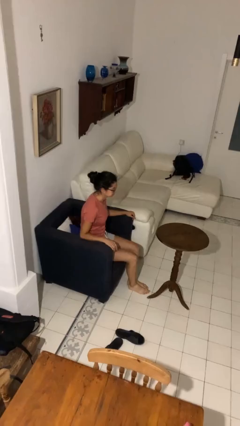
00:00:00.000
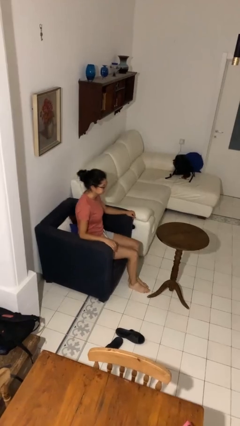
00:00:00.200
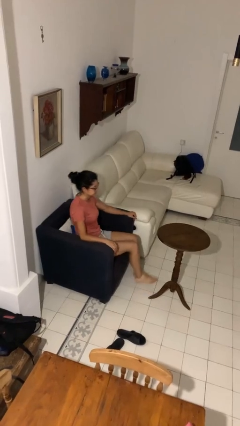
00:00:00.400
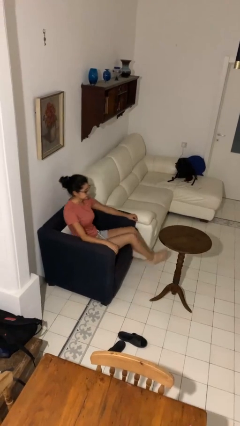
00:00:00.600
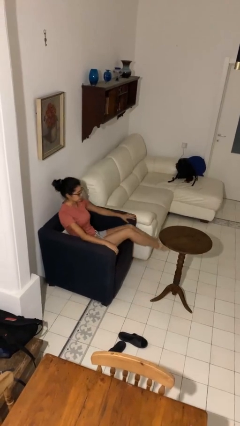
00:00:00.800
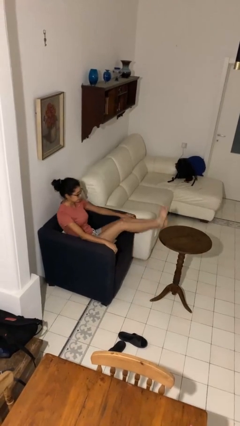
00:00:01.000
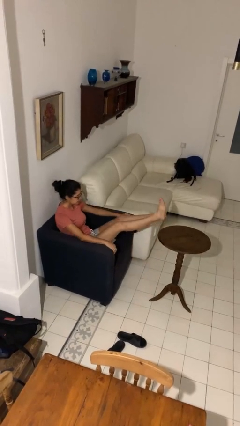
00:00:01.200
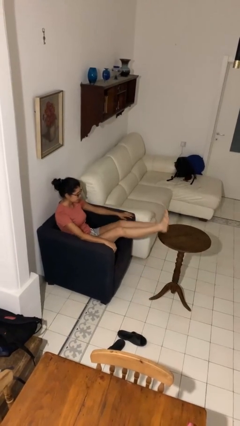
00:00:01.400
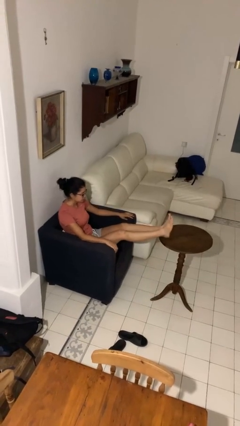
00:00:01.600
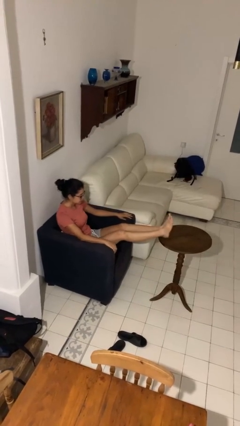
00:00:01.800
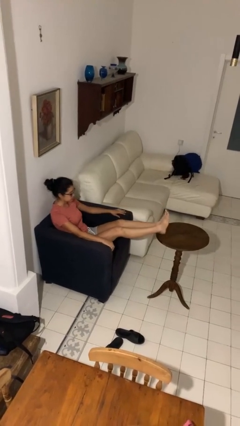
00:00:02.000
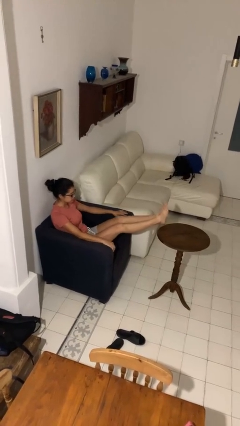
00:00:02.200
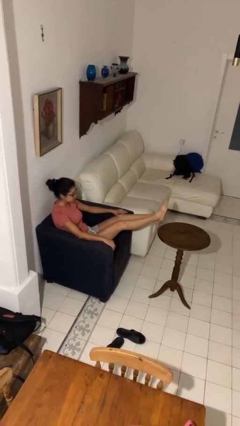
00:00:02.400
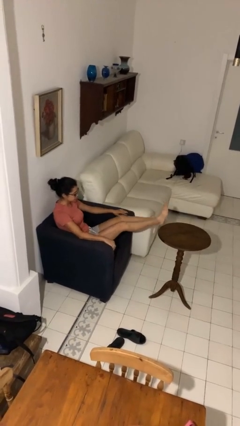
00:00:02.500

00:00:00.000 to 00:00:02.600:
person puts feet up

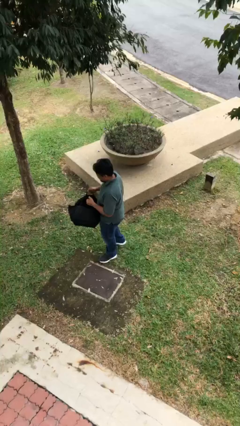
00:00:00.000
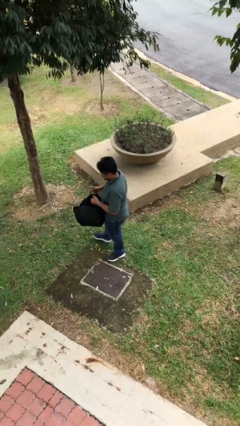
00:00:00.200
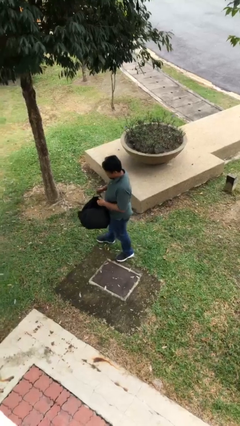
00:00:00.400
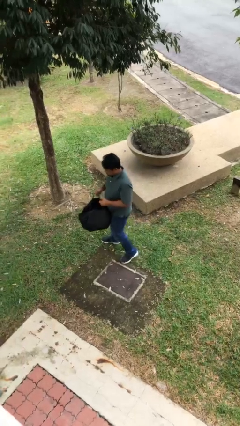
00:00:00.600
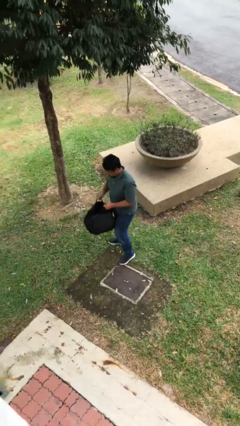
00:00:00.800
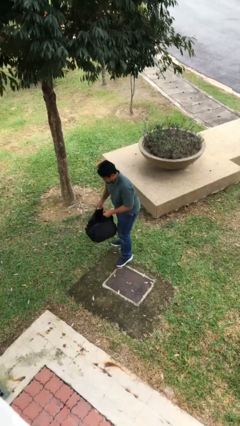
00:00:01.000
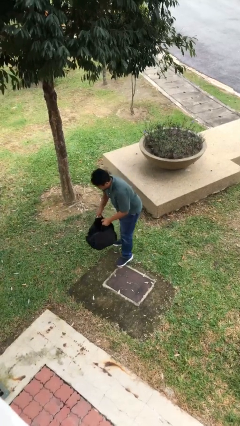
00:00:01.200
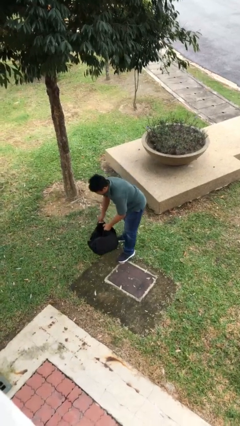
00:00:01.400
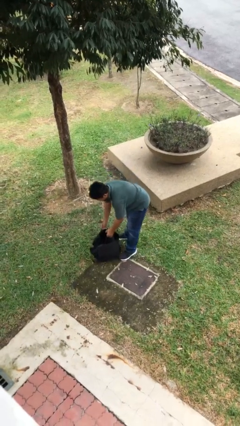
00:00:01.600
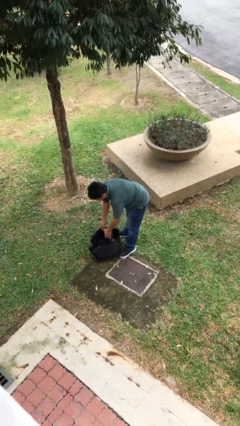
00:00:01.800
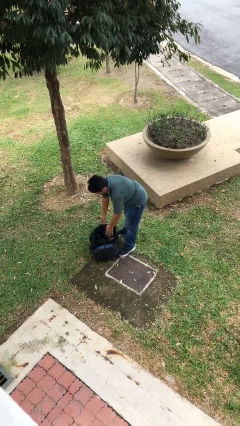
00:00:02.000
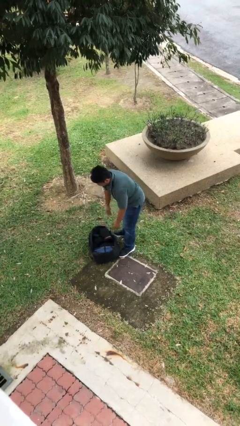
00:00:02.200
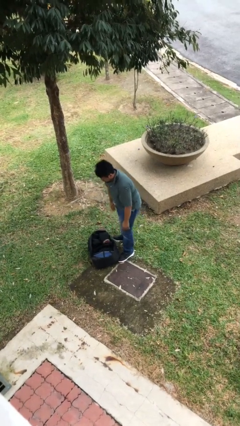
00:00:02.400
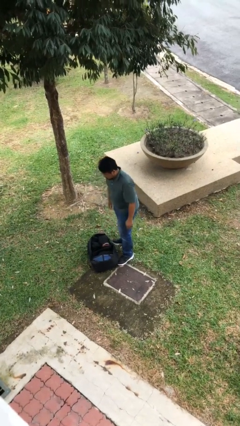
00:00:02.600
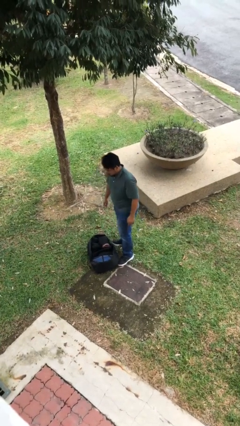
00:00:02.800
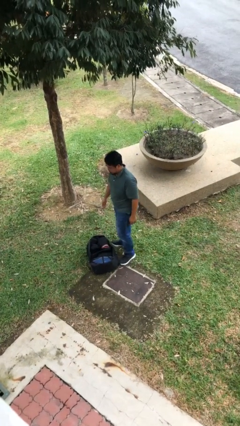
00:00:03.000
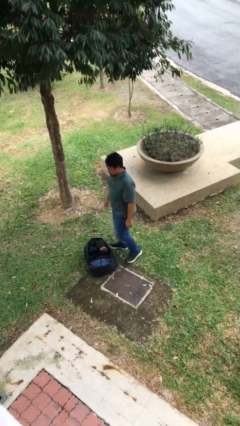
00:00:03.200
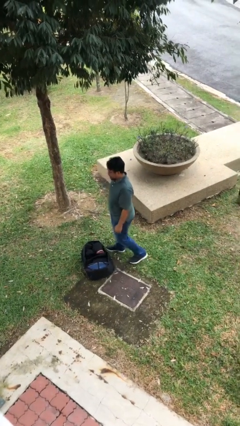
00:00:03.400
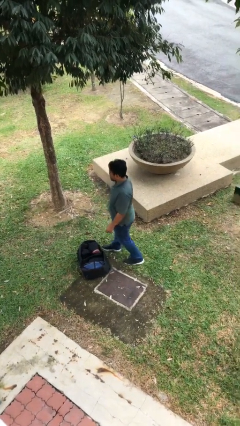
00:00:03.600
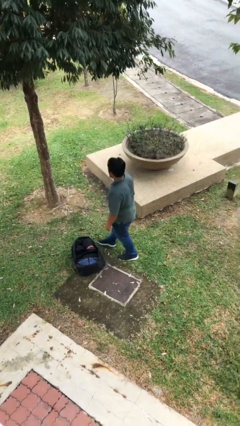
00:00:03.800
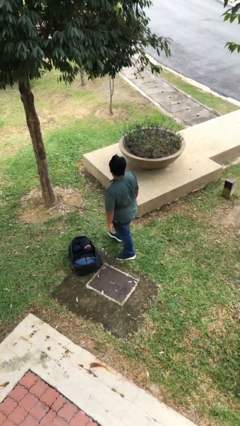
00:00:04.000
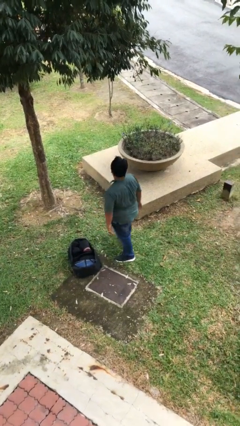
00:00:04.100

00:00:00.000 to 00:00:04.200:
person puts down object on floor

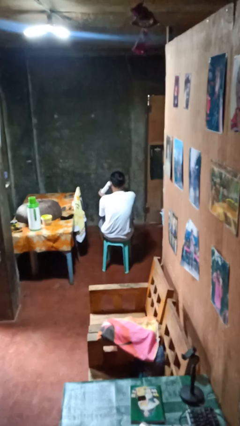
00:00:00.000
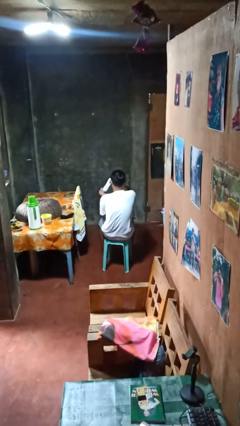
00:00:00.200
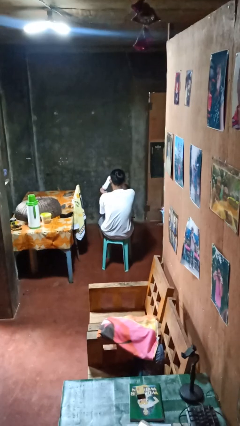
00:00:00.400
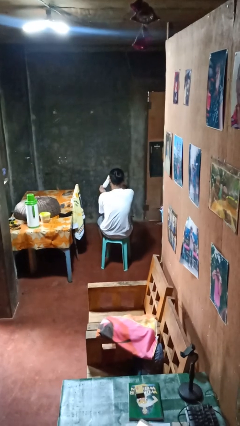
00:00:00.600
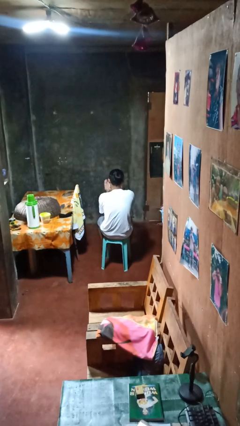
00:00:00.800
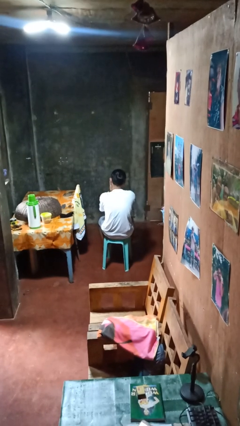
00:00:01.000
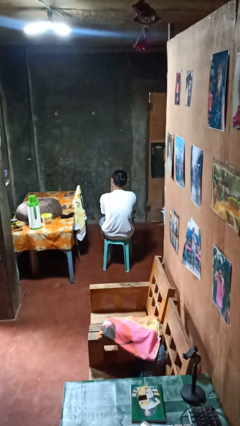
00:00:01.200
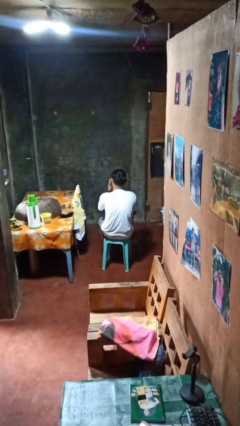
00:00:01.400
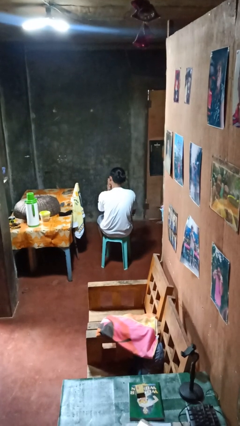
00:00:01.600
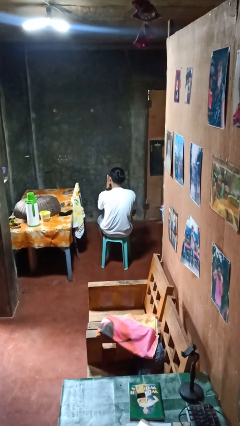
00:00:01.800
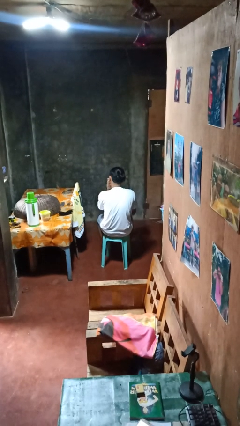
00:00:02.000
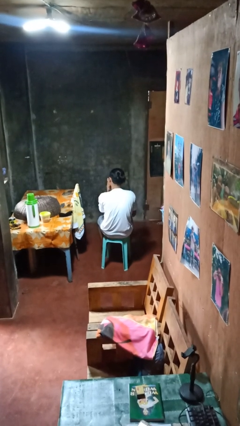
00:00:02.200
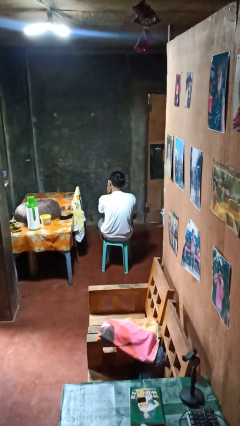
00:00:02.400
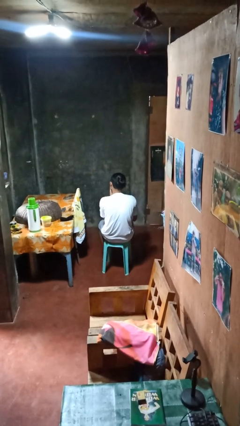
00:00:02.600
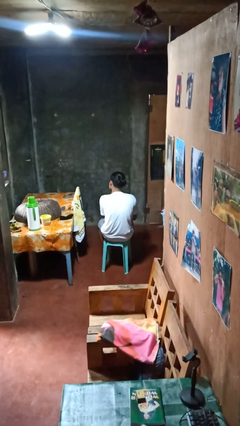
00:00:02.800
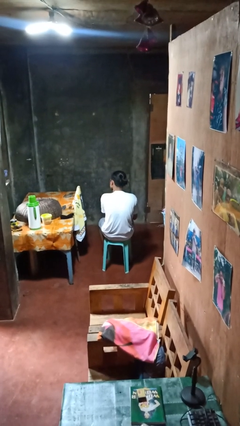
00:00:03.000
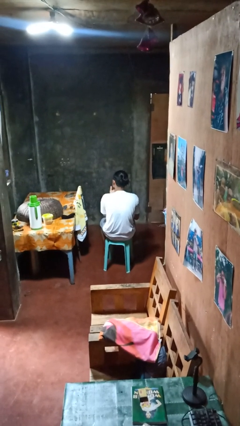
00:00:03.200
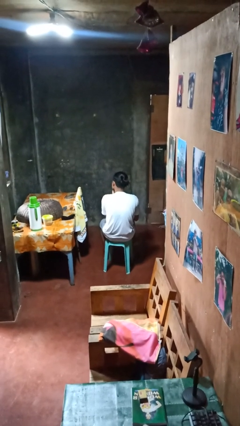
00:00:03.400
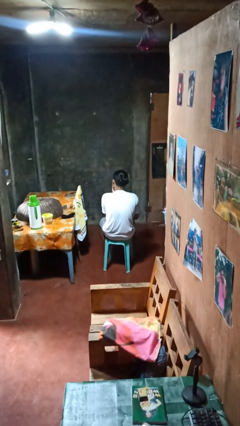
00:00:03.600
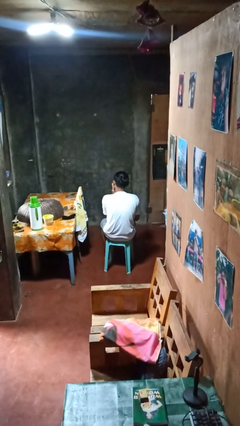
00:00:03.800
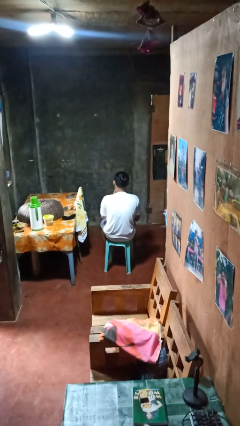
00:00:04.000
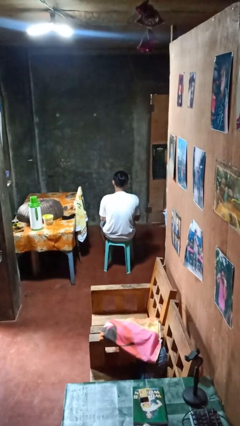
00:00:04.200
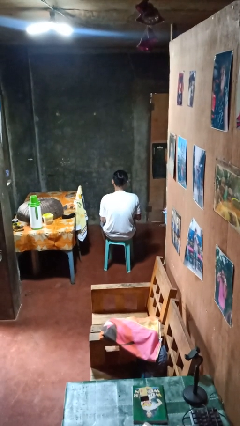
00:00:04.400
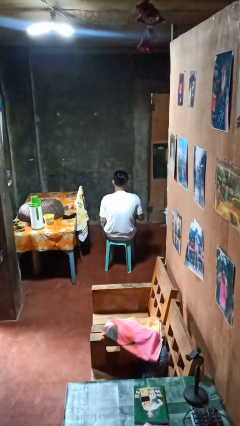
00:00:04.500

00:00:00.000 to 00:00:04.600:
person applies shaving cream

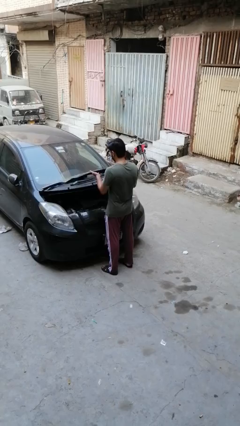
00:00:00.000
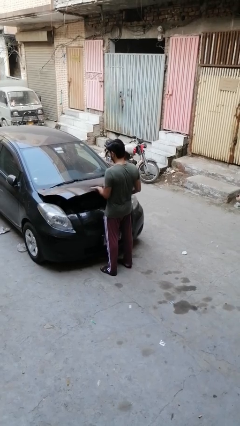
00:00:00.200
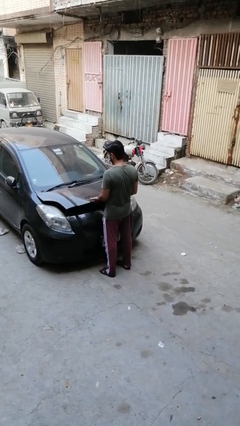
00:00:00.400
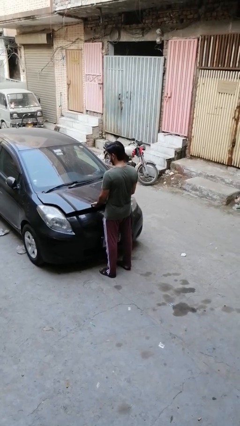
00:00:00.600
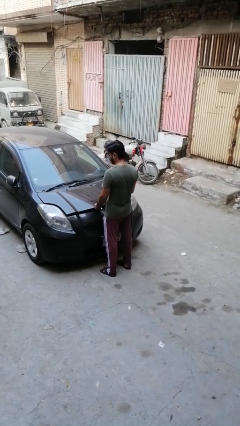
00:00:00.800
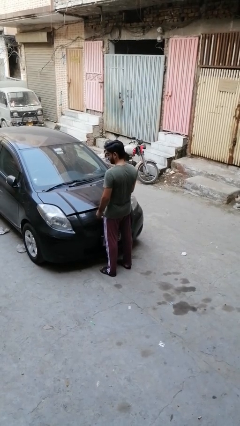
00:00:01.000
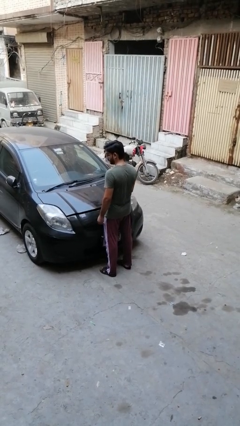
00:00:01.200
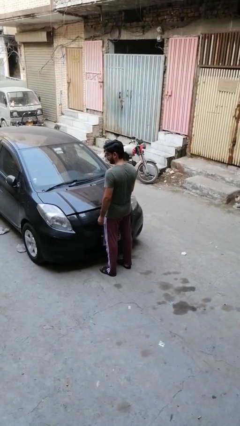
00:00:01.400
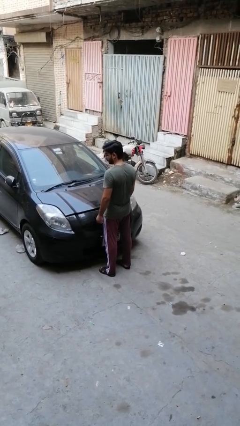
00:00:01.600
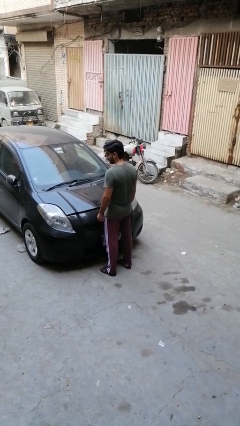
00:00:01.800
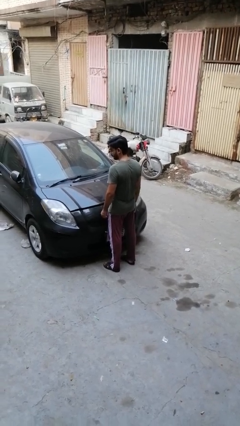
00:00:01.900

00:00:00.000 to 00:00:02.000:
person closes car hood

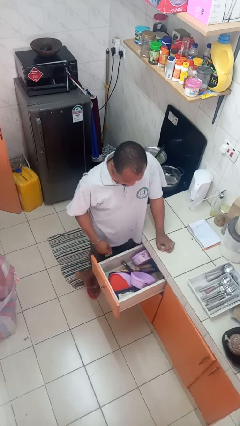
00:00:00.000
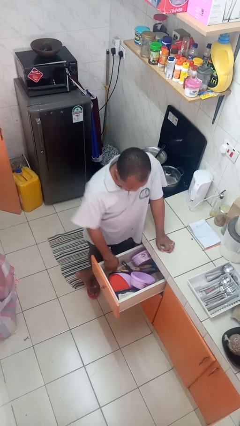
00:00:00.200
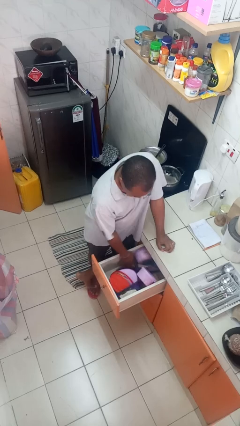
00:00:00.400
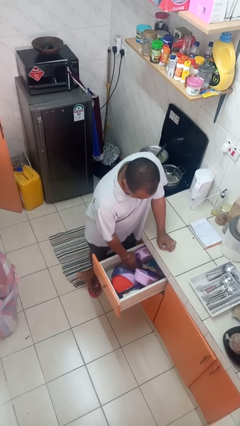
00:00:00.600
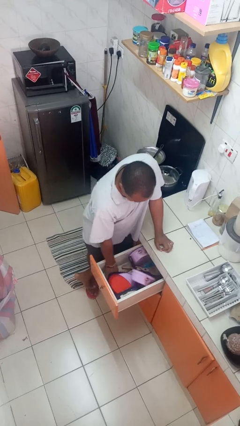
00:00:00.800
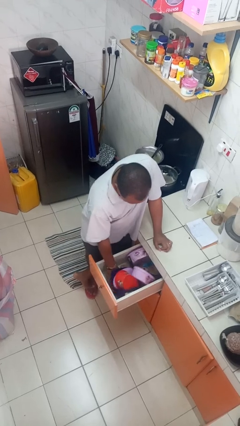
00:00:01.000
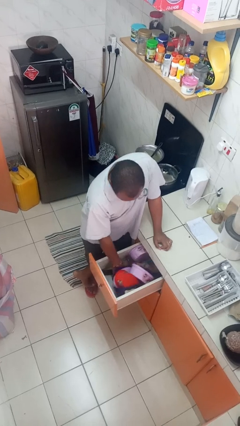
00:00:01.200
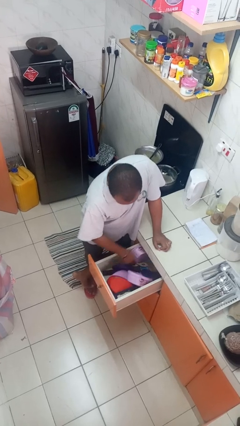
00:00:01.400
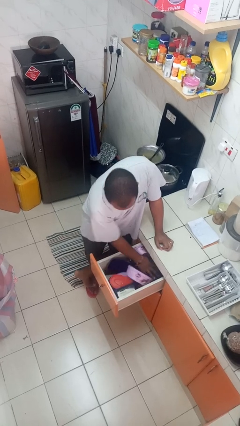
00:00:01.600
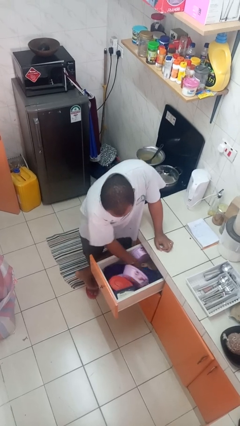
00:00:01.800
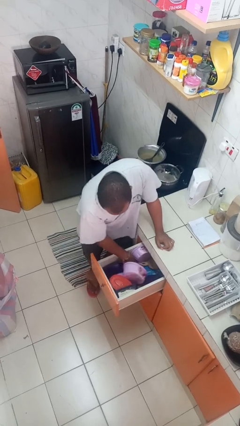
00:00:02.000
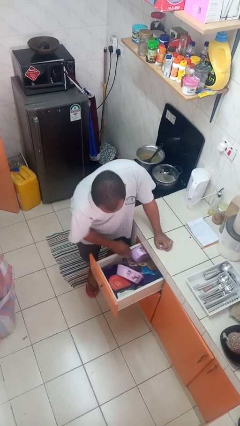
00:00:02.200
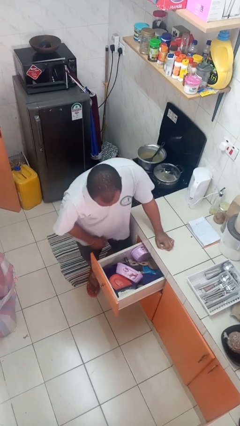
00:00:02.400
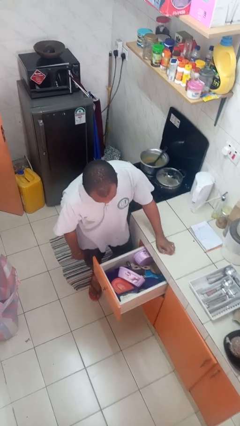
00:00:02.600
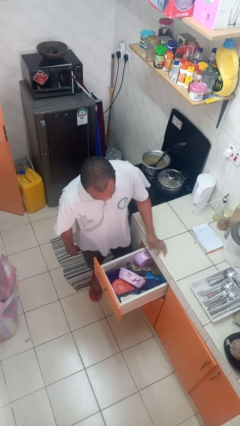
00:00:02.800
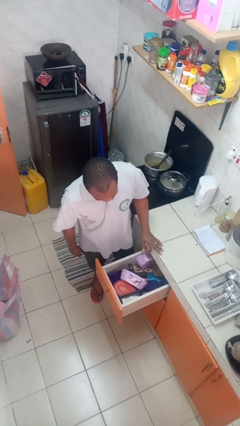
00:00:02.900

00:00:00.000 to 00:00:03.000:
person searches in kitchen drawer

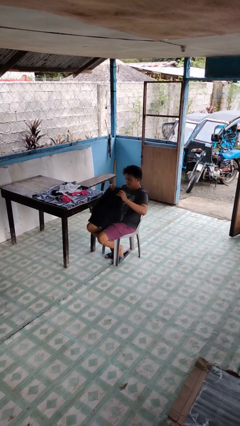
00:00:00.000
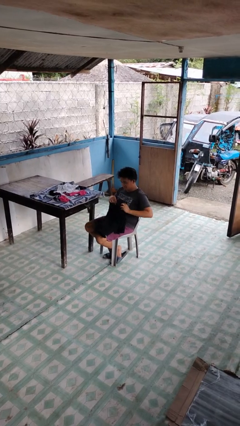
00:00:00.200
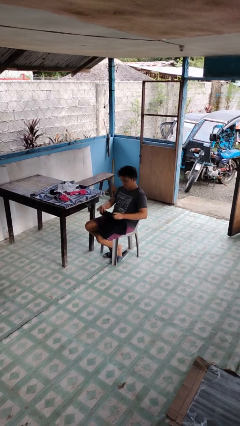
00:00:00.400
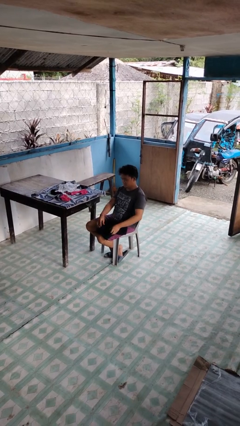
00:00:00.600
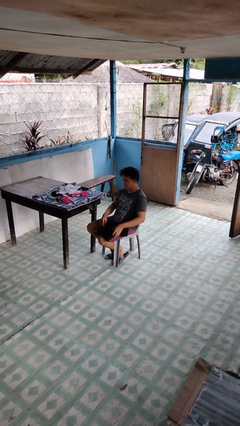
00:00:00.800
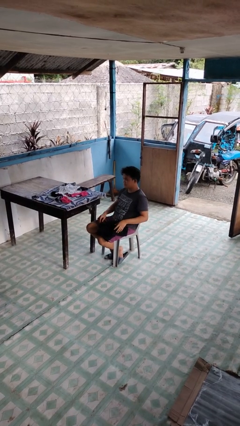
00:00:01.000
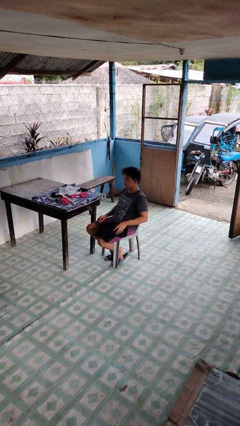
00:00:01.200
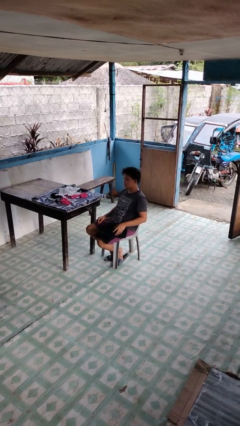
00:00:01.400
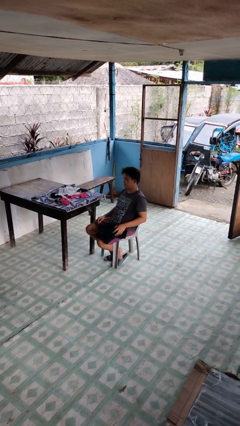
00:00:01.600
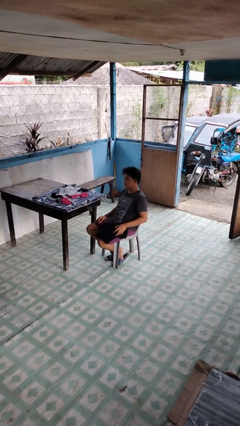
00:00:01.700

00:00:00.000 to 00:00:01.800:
person folds pants
